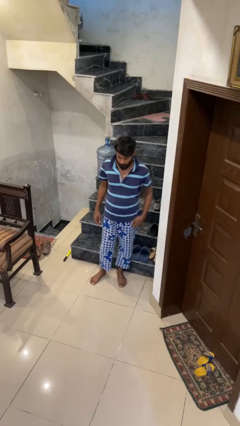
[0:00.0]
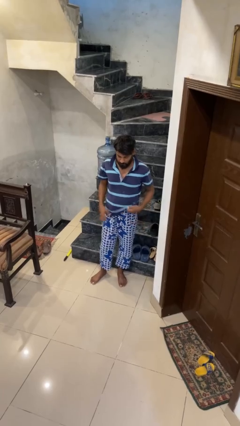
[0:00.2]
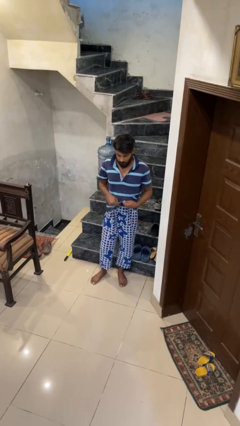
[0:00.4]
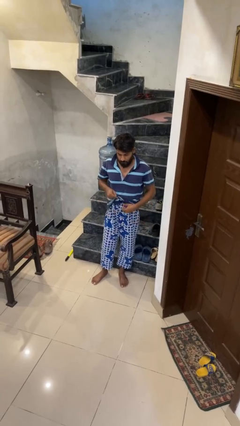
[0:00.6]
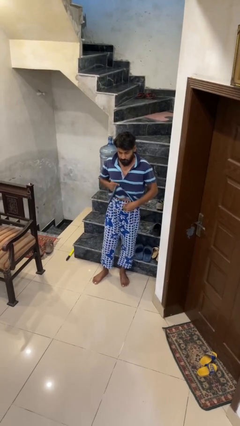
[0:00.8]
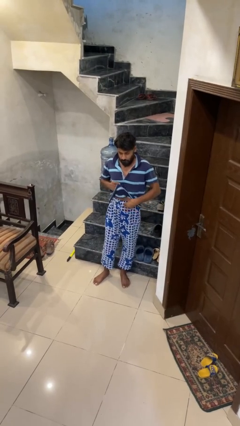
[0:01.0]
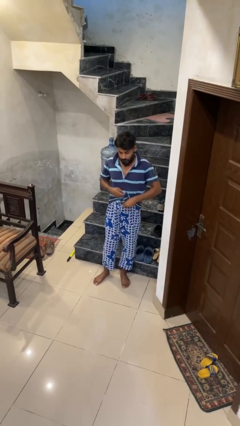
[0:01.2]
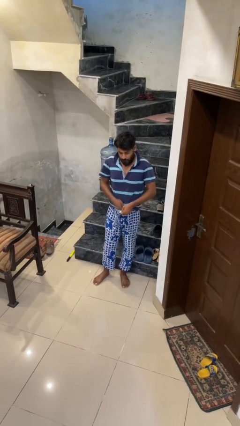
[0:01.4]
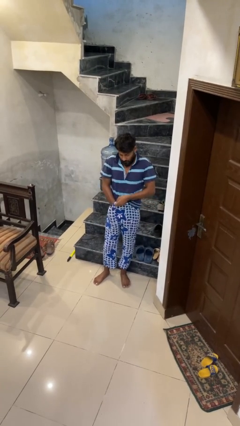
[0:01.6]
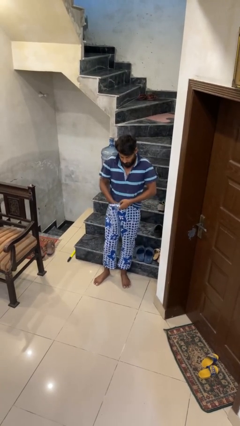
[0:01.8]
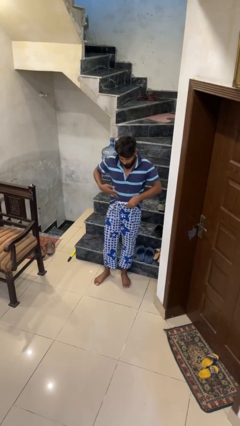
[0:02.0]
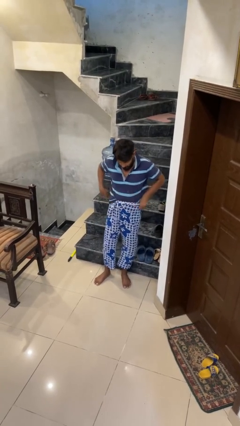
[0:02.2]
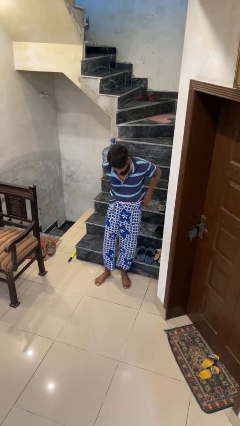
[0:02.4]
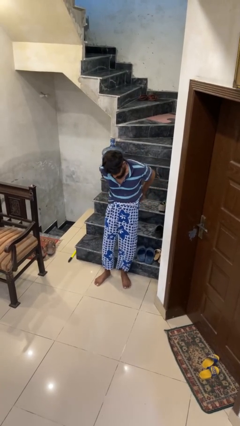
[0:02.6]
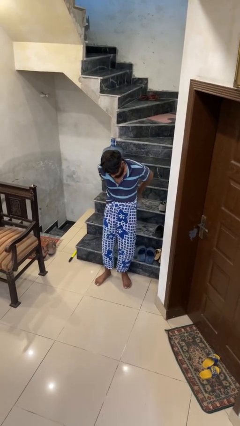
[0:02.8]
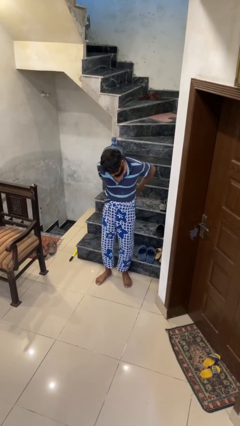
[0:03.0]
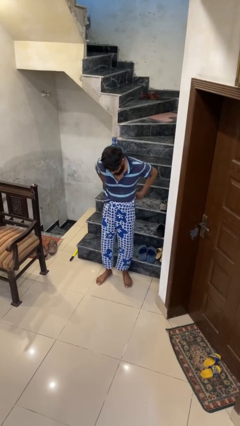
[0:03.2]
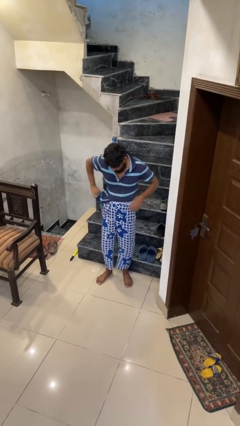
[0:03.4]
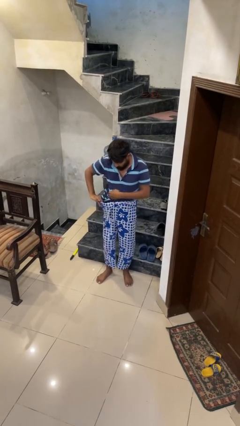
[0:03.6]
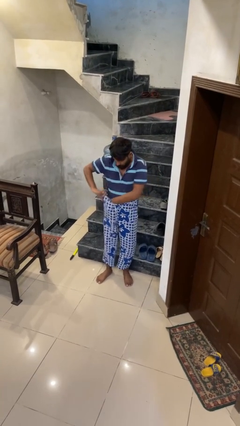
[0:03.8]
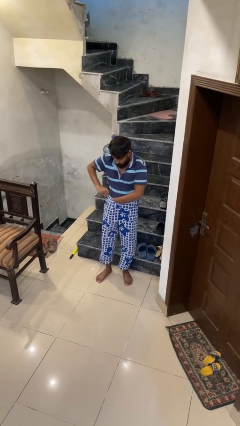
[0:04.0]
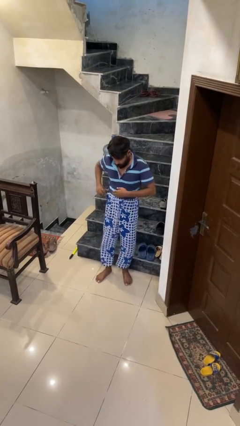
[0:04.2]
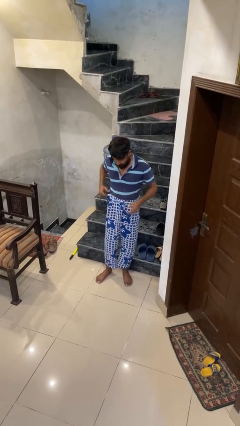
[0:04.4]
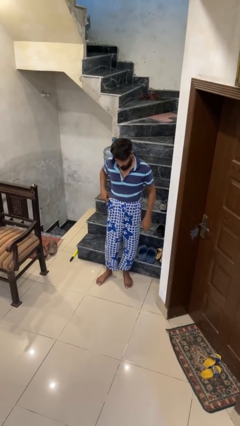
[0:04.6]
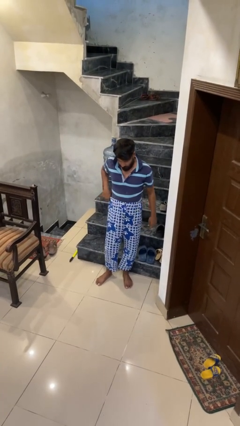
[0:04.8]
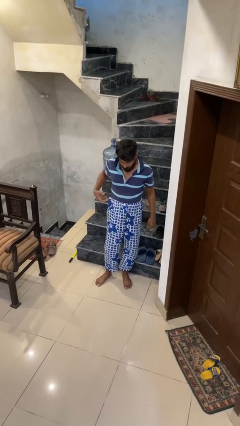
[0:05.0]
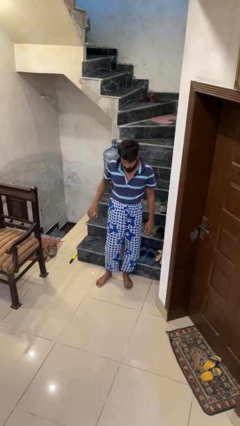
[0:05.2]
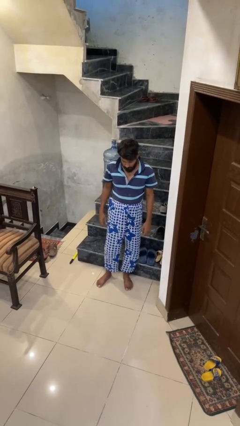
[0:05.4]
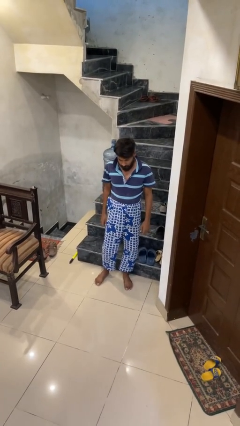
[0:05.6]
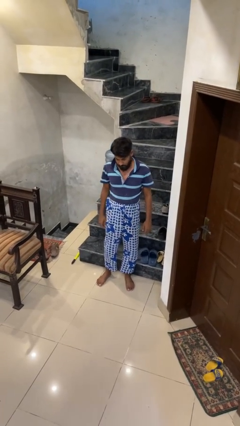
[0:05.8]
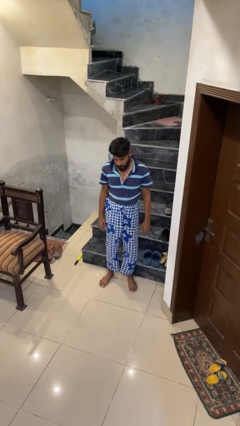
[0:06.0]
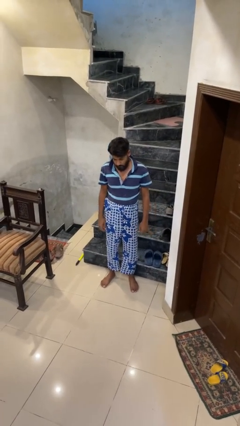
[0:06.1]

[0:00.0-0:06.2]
person tucks in shirt

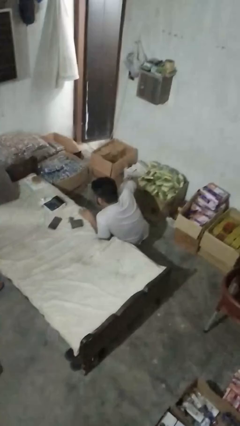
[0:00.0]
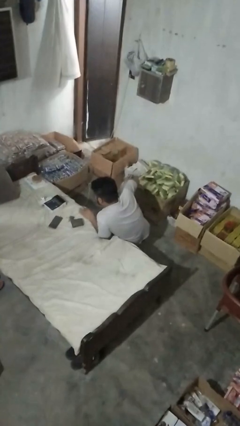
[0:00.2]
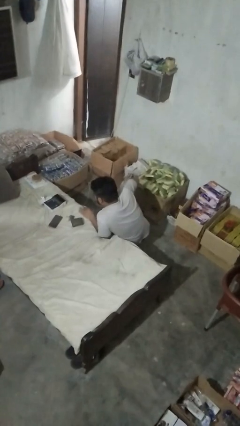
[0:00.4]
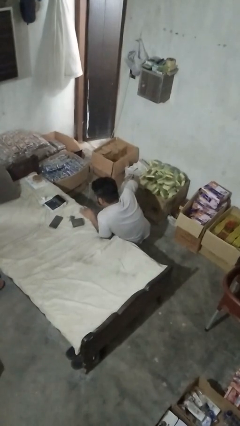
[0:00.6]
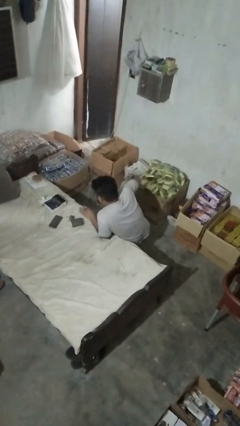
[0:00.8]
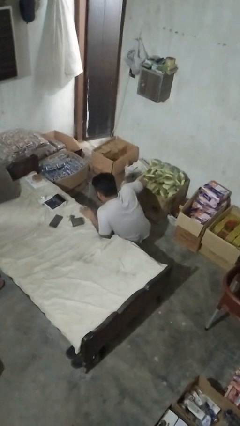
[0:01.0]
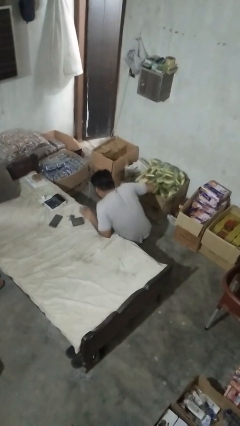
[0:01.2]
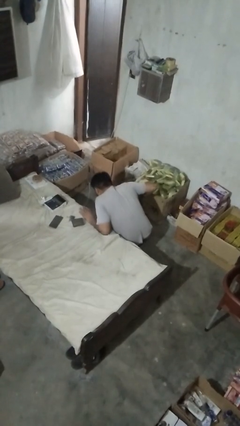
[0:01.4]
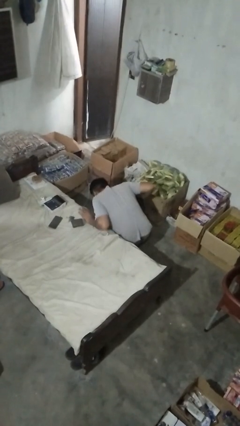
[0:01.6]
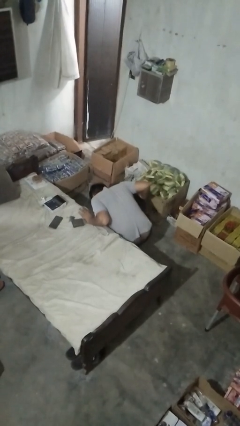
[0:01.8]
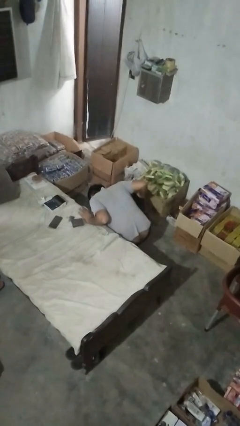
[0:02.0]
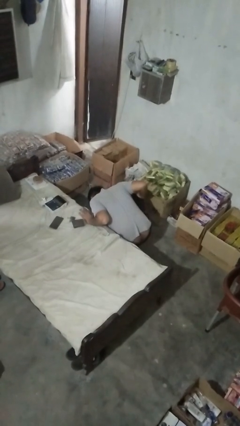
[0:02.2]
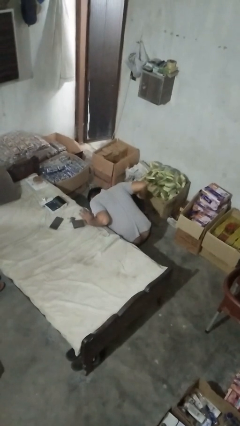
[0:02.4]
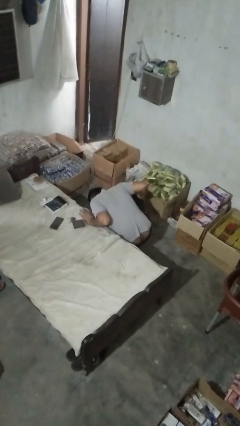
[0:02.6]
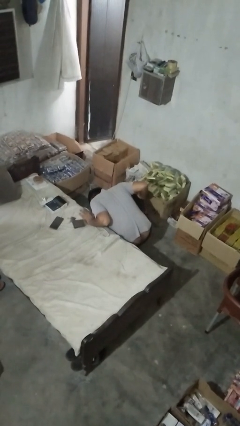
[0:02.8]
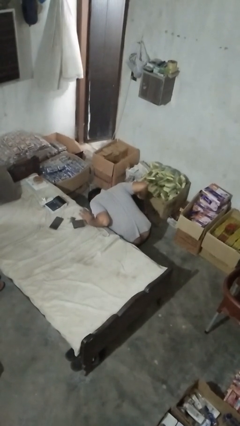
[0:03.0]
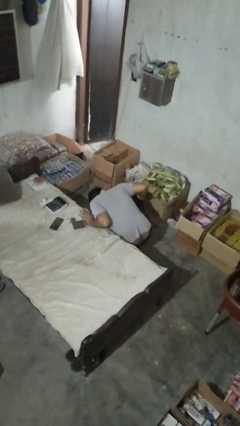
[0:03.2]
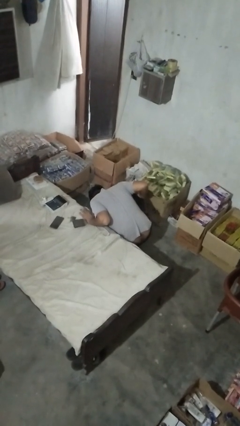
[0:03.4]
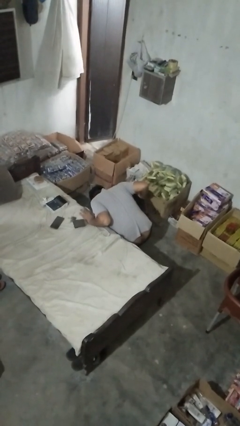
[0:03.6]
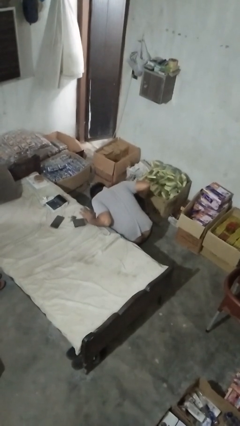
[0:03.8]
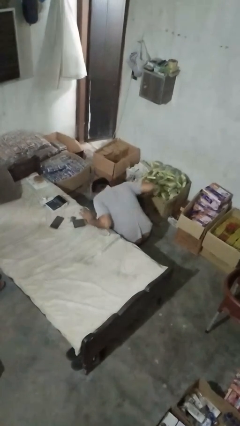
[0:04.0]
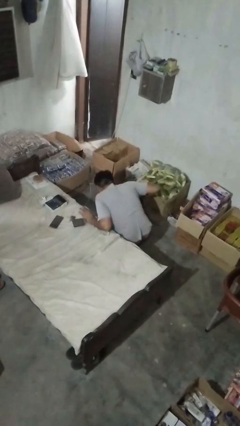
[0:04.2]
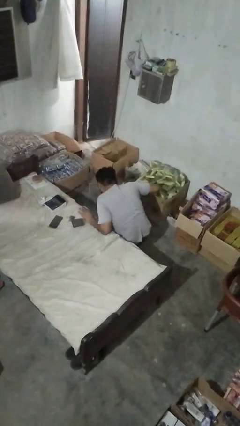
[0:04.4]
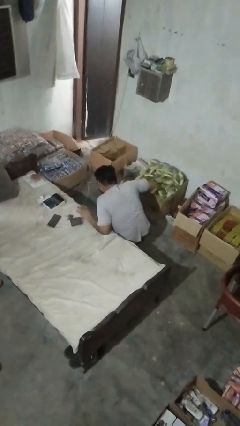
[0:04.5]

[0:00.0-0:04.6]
person searches under couch

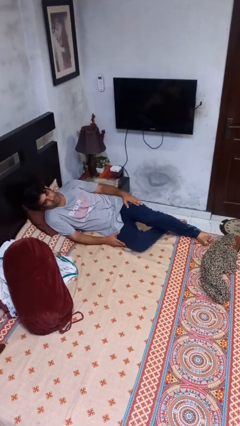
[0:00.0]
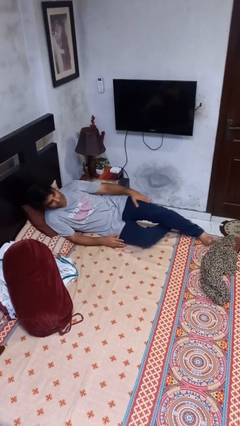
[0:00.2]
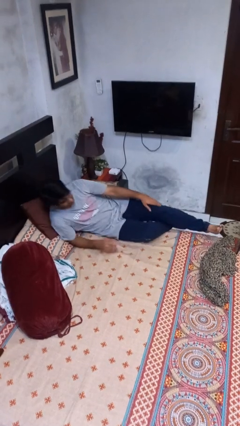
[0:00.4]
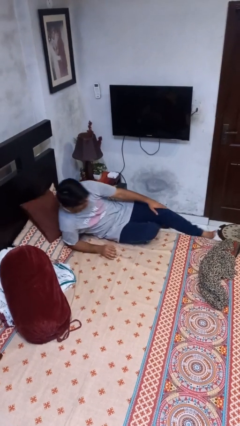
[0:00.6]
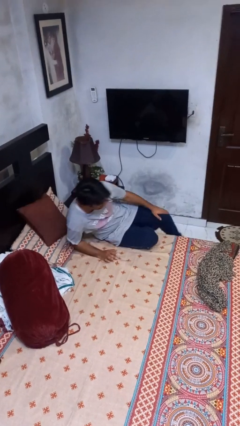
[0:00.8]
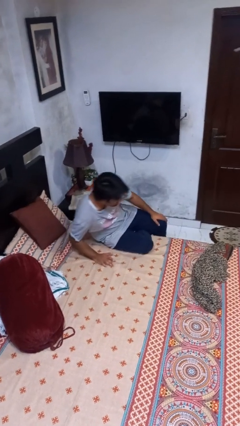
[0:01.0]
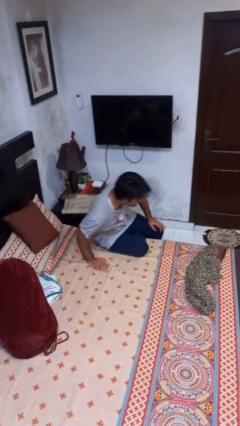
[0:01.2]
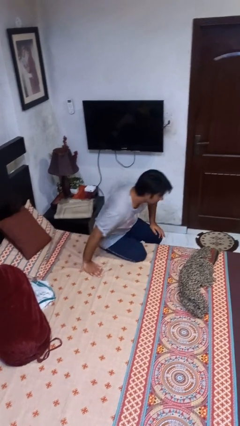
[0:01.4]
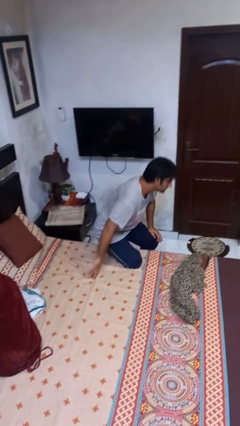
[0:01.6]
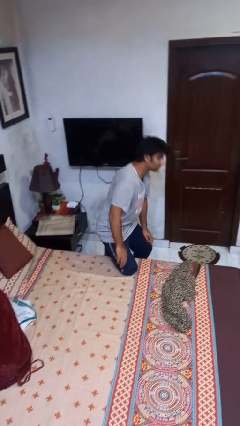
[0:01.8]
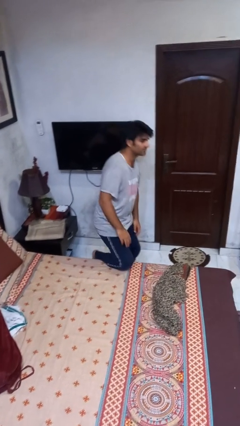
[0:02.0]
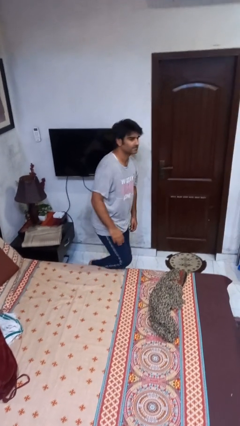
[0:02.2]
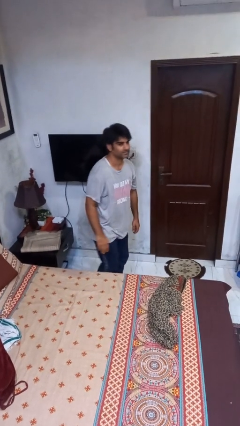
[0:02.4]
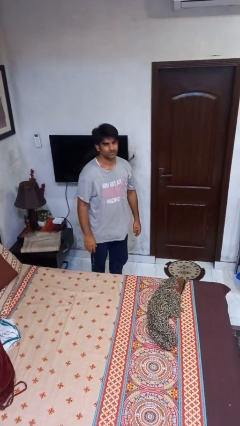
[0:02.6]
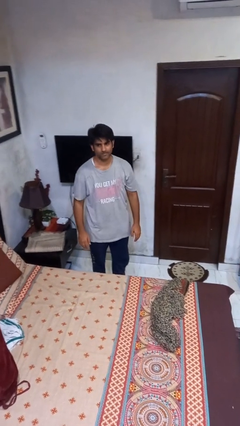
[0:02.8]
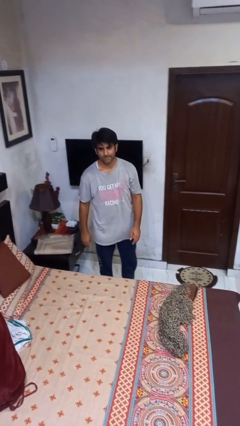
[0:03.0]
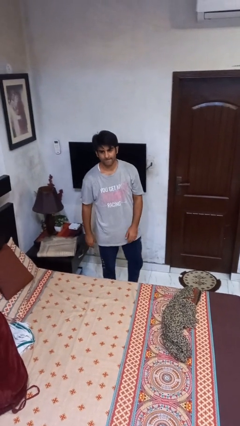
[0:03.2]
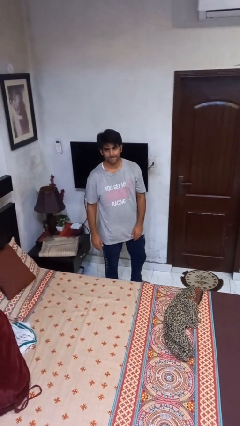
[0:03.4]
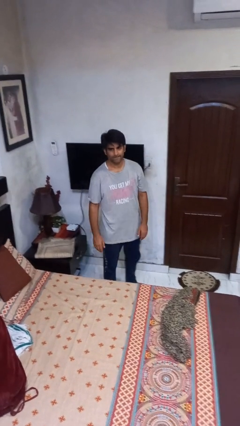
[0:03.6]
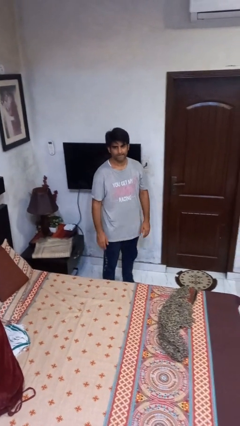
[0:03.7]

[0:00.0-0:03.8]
person stands up

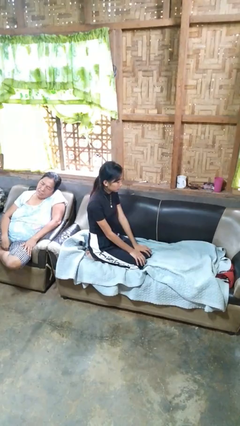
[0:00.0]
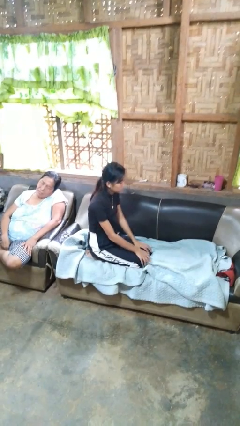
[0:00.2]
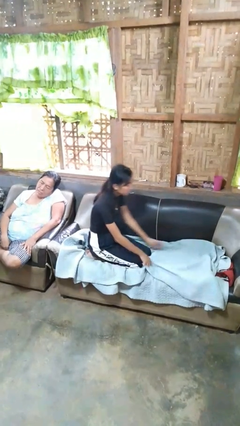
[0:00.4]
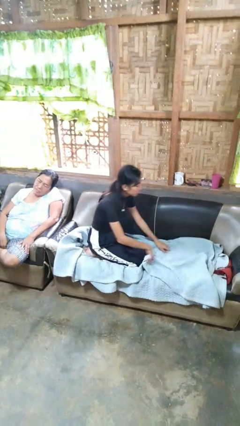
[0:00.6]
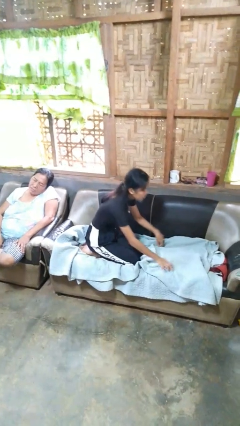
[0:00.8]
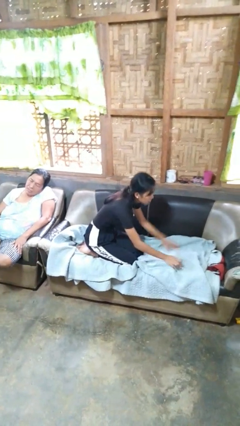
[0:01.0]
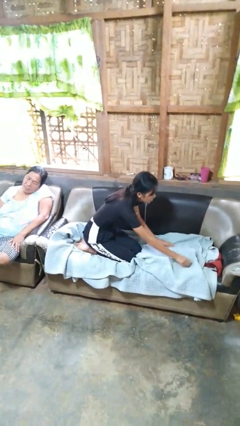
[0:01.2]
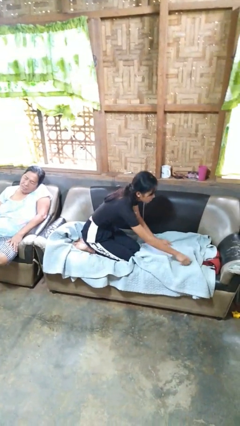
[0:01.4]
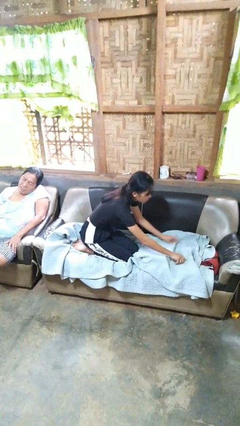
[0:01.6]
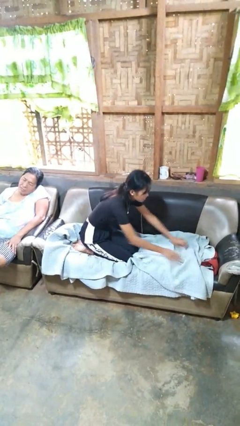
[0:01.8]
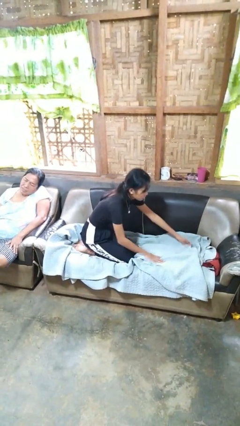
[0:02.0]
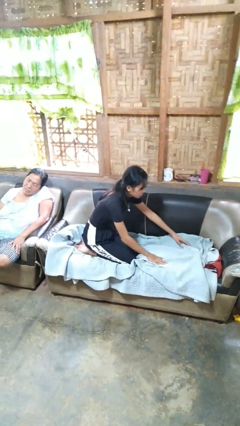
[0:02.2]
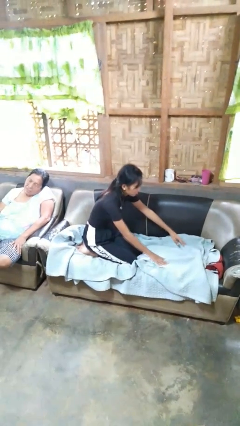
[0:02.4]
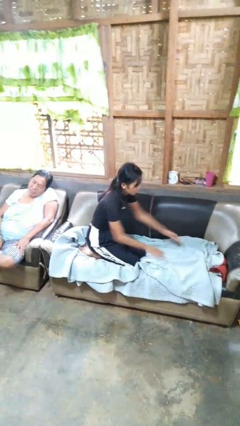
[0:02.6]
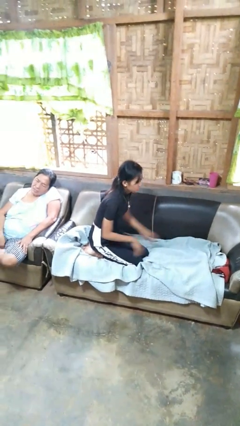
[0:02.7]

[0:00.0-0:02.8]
person searches in couch

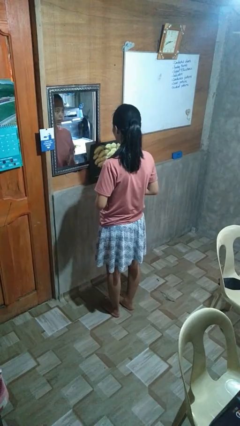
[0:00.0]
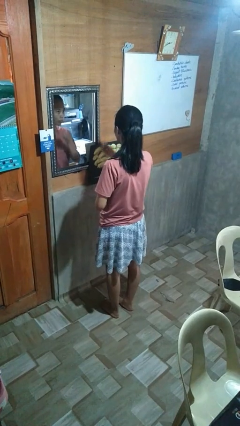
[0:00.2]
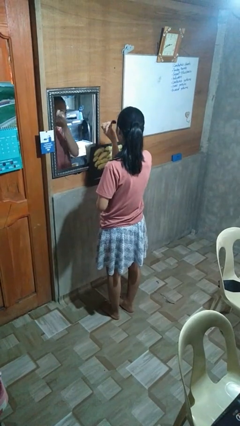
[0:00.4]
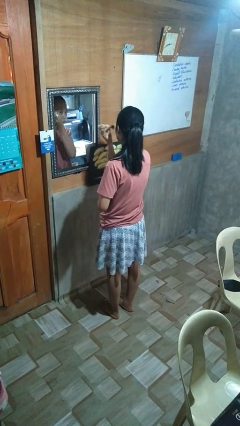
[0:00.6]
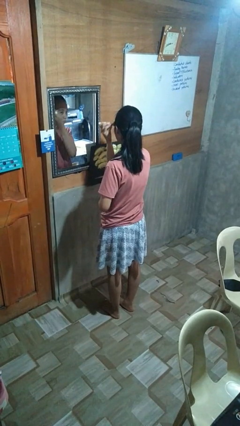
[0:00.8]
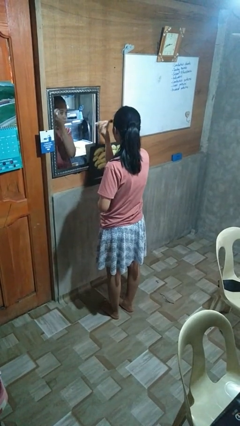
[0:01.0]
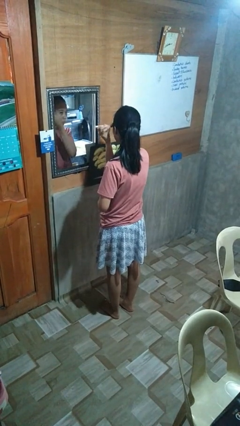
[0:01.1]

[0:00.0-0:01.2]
person applies foundation makeup
